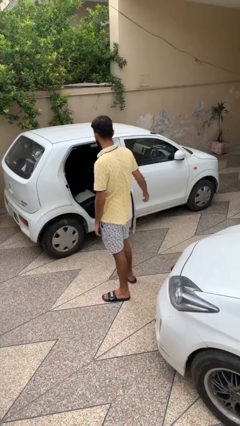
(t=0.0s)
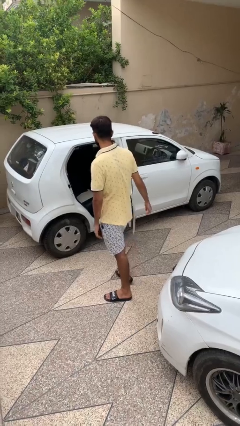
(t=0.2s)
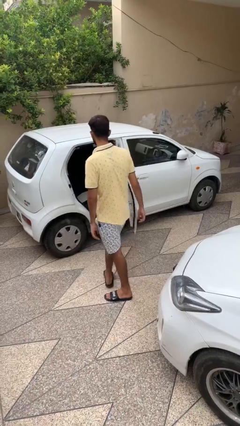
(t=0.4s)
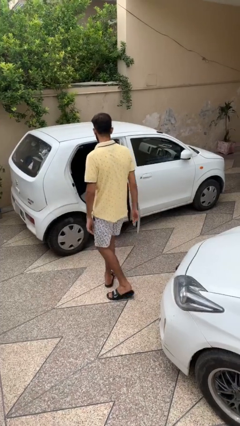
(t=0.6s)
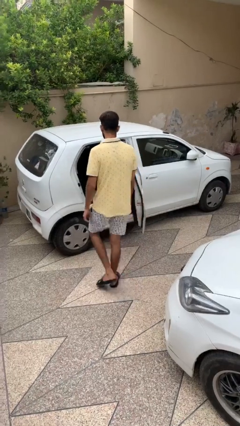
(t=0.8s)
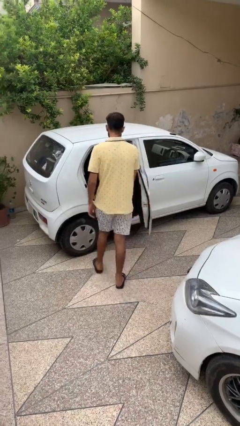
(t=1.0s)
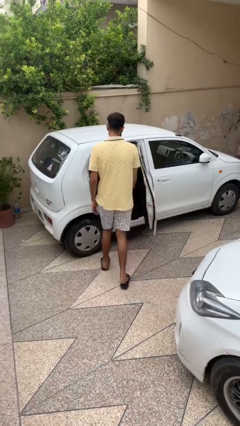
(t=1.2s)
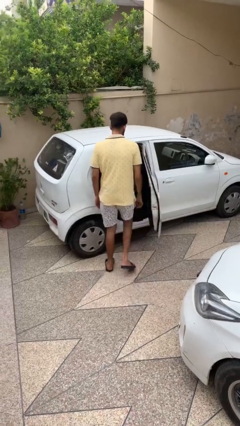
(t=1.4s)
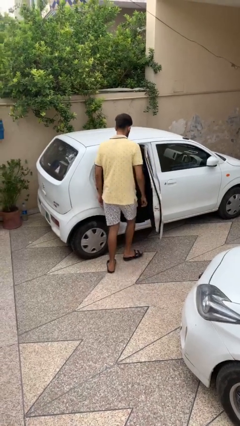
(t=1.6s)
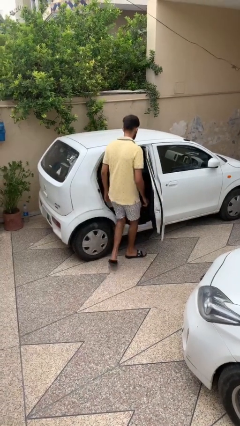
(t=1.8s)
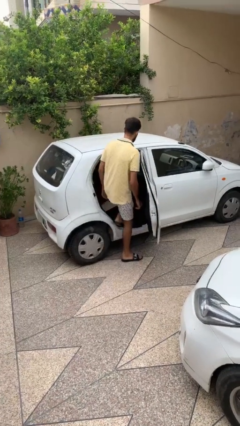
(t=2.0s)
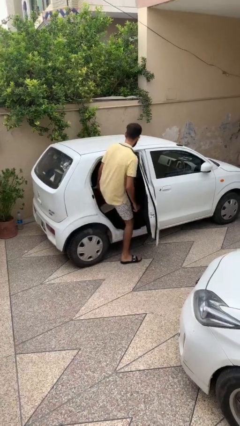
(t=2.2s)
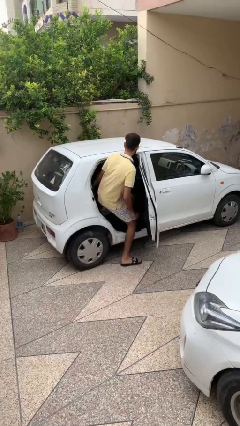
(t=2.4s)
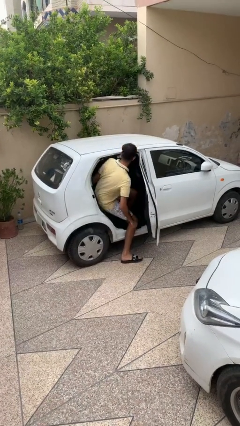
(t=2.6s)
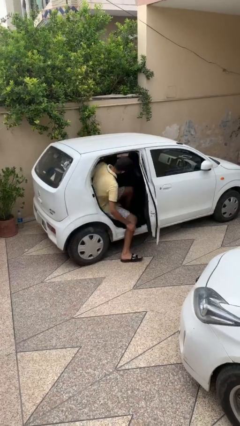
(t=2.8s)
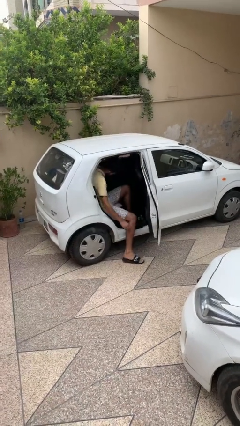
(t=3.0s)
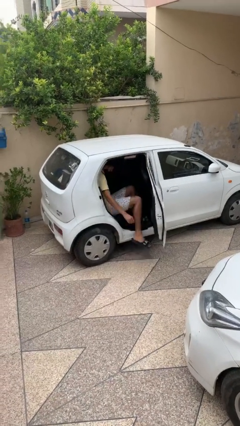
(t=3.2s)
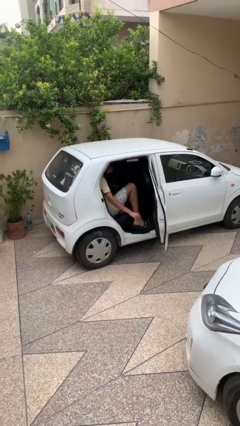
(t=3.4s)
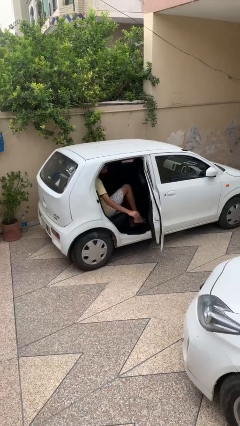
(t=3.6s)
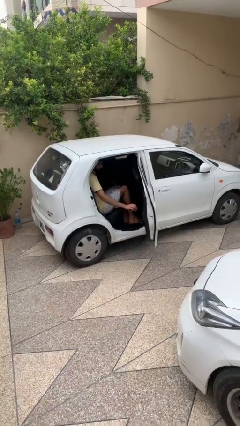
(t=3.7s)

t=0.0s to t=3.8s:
person enters car

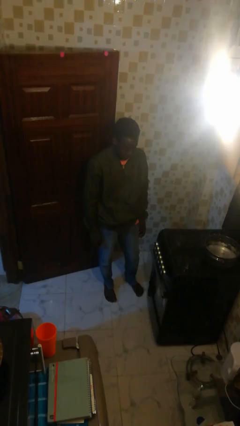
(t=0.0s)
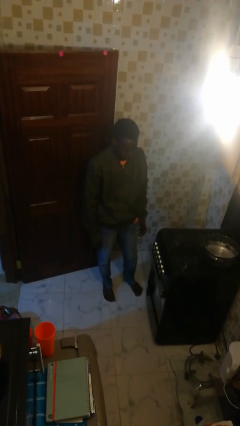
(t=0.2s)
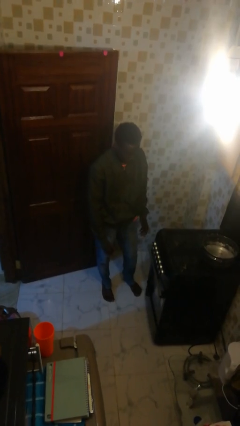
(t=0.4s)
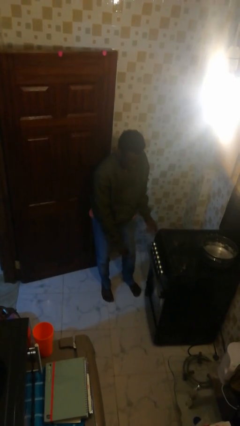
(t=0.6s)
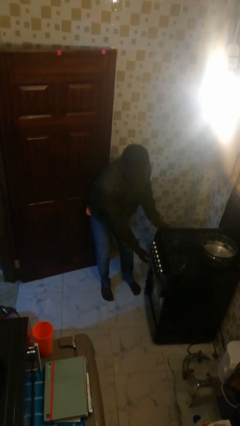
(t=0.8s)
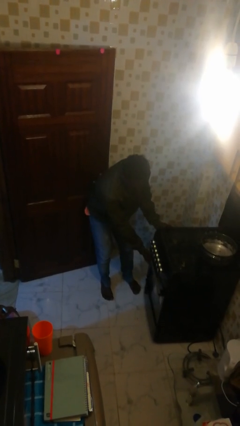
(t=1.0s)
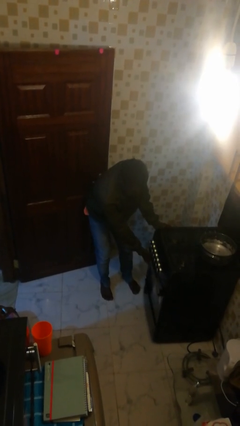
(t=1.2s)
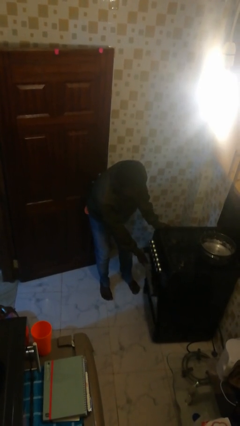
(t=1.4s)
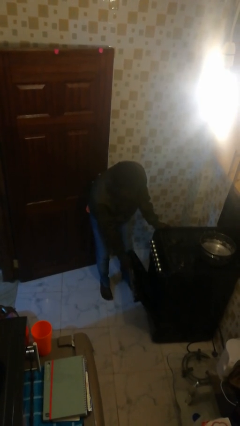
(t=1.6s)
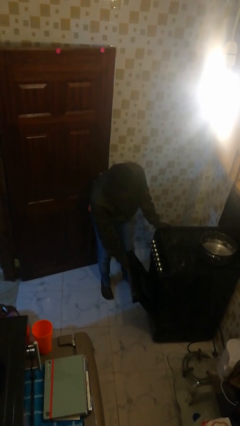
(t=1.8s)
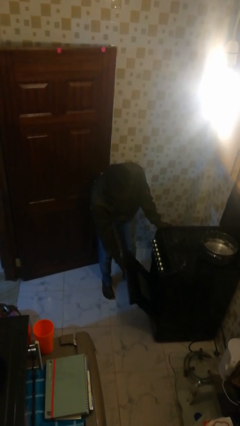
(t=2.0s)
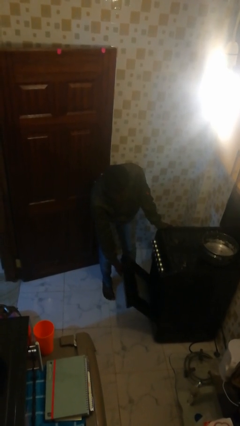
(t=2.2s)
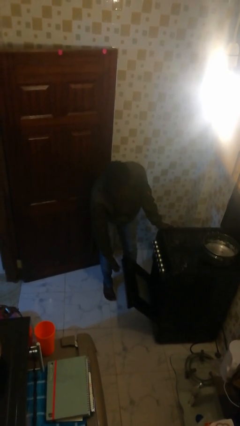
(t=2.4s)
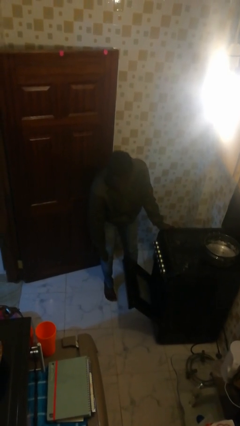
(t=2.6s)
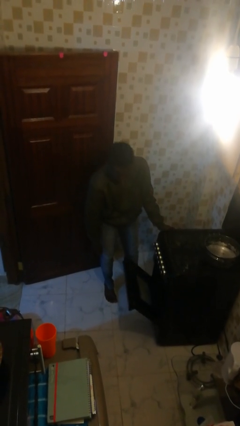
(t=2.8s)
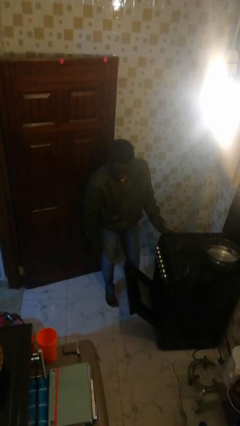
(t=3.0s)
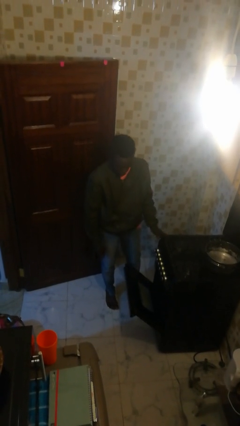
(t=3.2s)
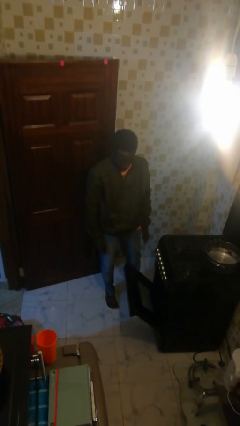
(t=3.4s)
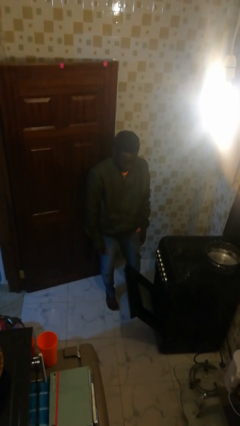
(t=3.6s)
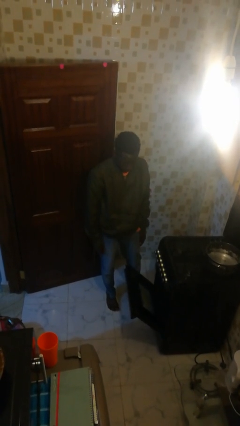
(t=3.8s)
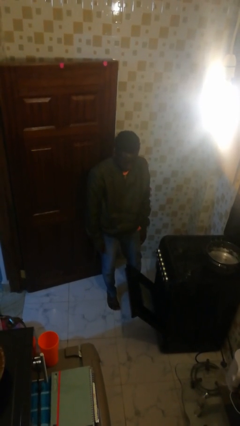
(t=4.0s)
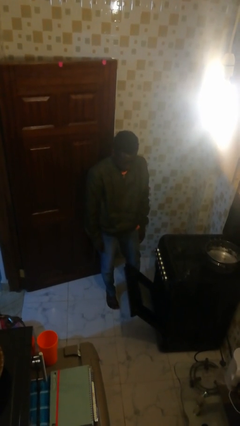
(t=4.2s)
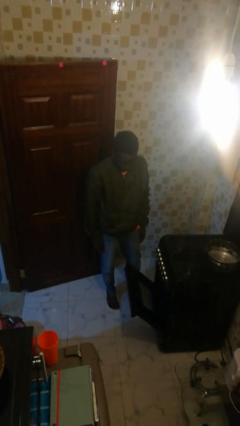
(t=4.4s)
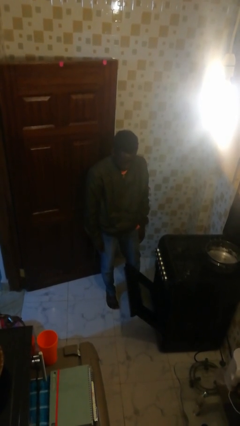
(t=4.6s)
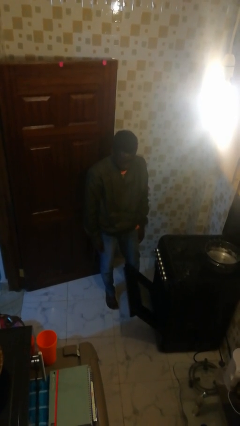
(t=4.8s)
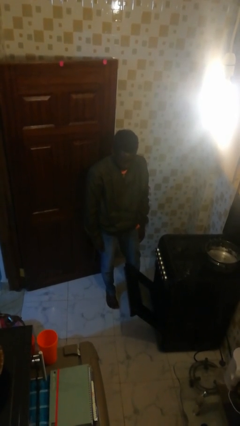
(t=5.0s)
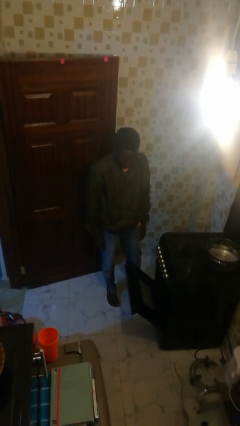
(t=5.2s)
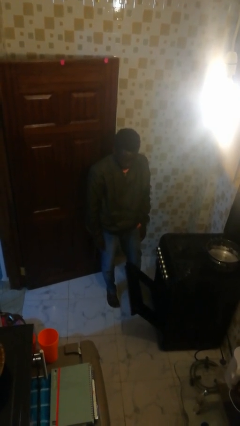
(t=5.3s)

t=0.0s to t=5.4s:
person opens oven door

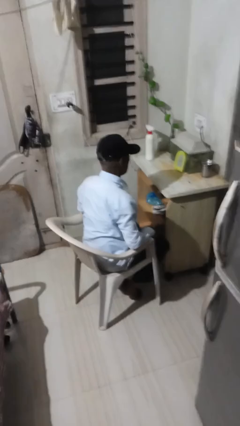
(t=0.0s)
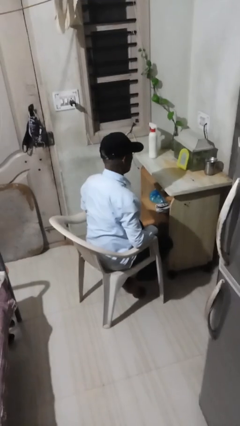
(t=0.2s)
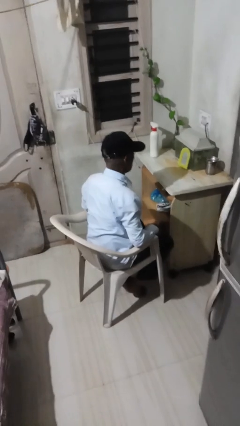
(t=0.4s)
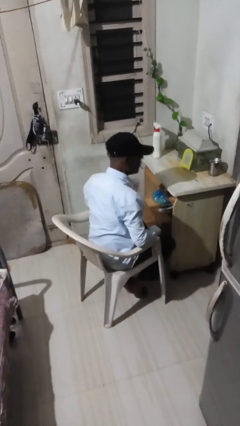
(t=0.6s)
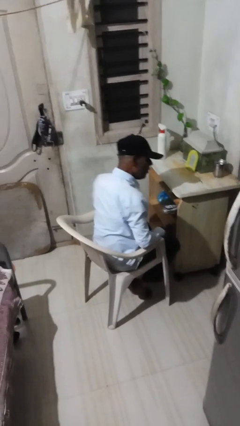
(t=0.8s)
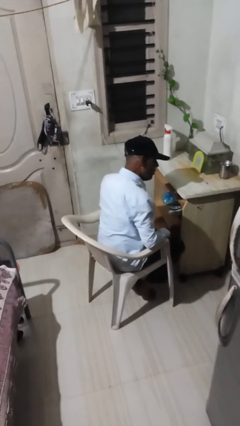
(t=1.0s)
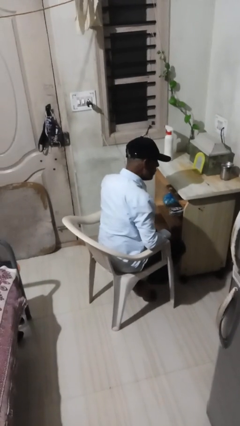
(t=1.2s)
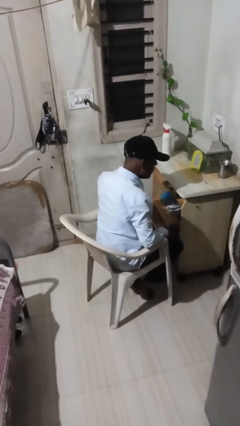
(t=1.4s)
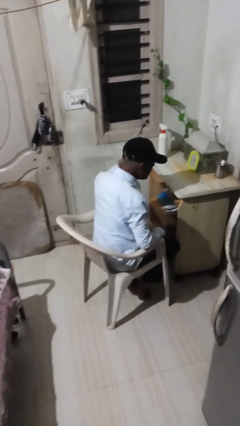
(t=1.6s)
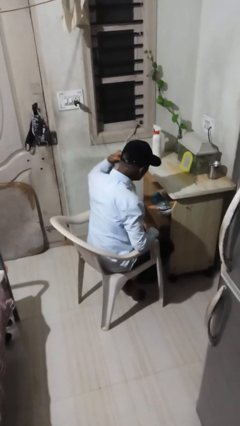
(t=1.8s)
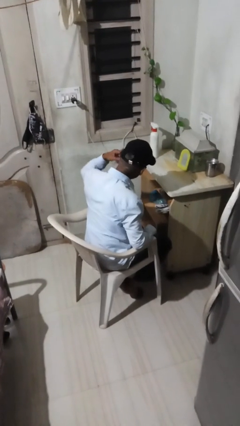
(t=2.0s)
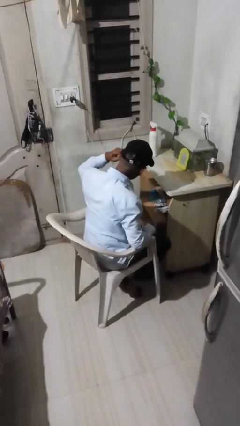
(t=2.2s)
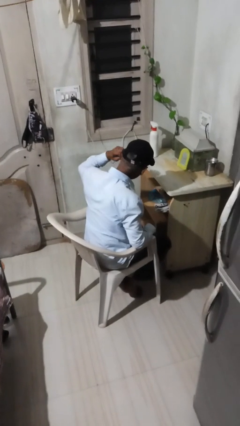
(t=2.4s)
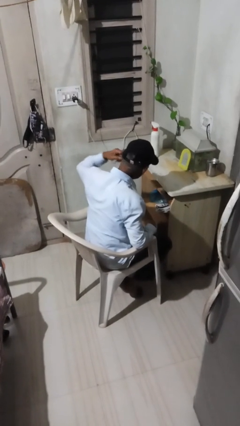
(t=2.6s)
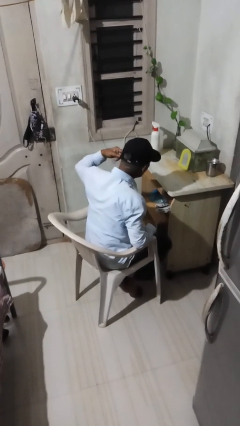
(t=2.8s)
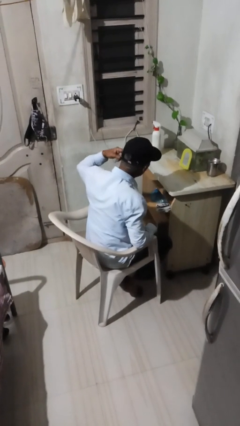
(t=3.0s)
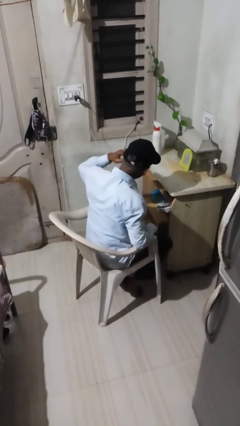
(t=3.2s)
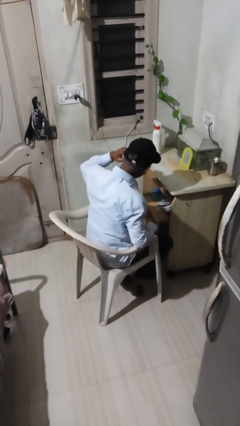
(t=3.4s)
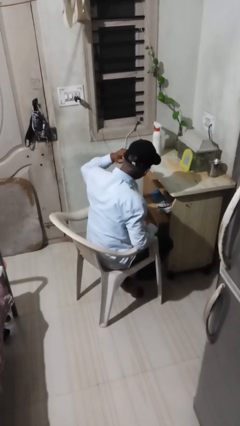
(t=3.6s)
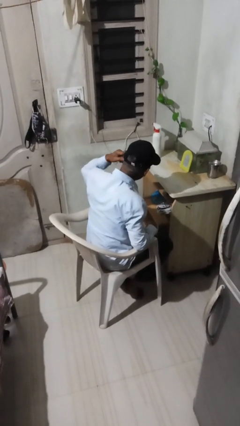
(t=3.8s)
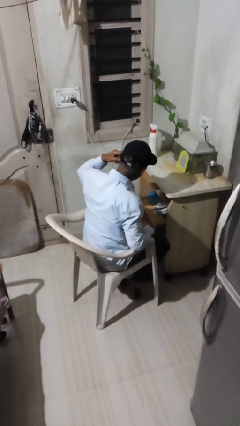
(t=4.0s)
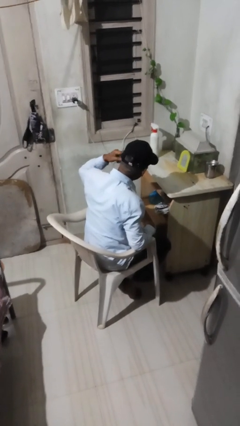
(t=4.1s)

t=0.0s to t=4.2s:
person puts fingers in ear

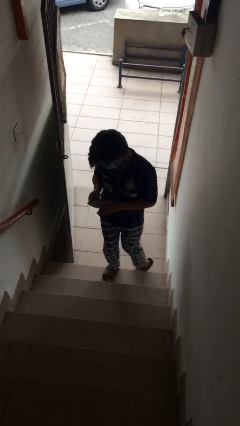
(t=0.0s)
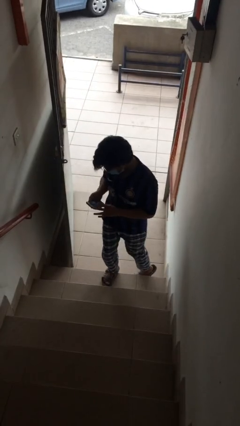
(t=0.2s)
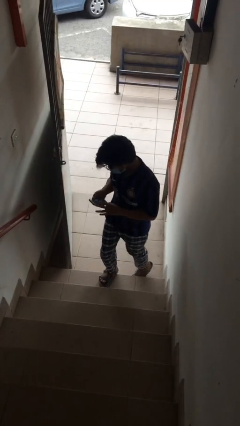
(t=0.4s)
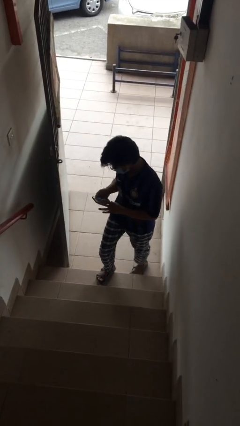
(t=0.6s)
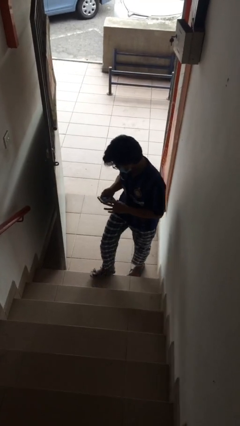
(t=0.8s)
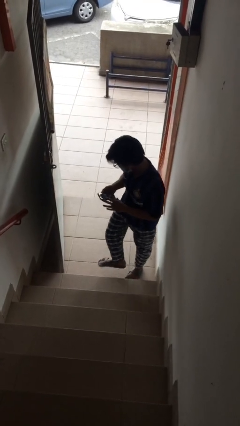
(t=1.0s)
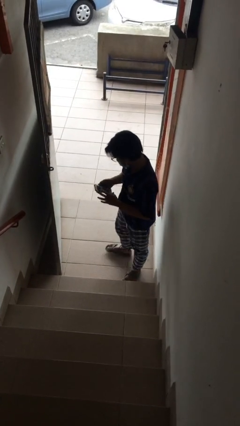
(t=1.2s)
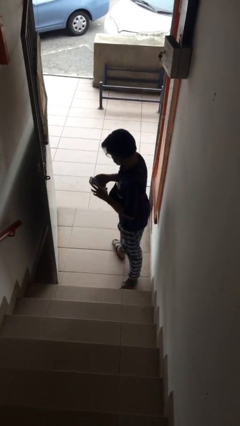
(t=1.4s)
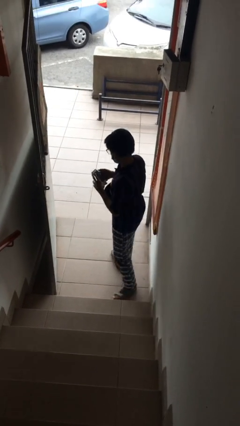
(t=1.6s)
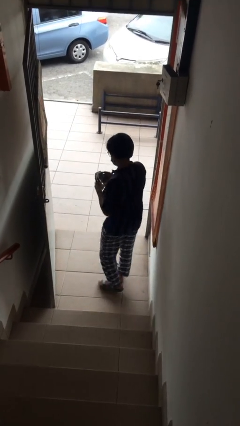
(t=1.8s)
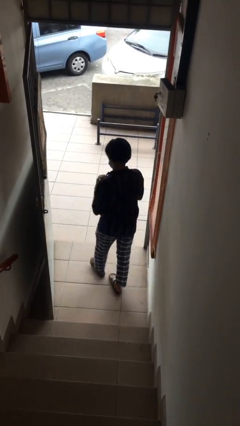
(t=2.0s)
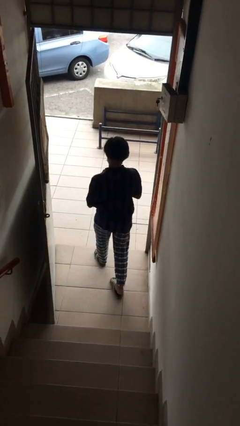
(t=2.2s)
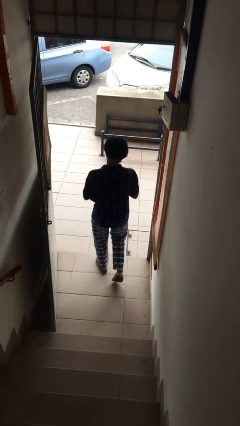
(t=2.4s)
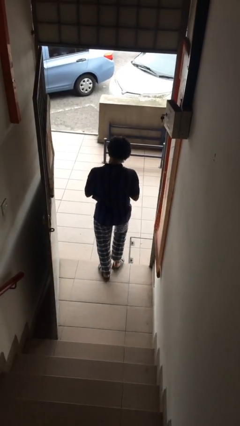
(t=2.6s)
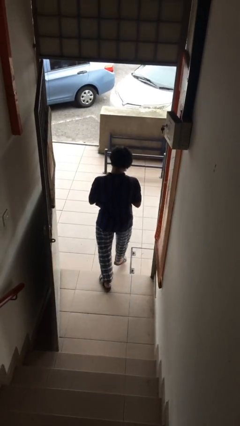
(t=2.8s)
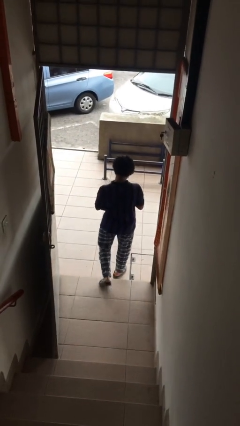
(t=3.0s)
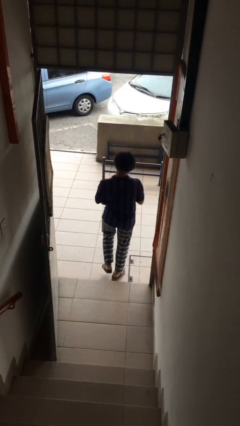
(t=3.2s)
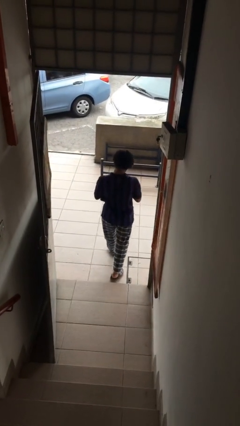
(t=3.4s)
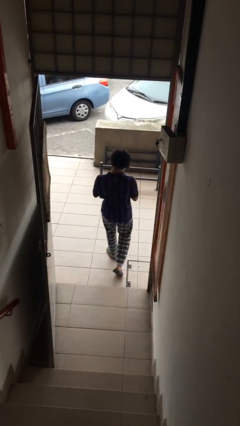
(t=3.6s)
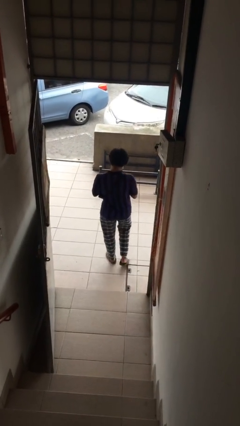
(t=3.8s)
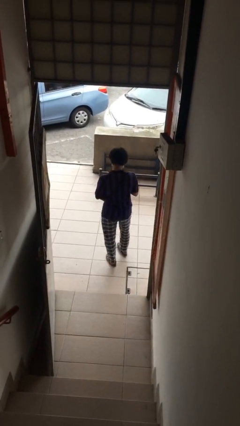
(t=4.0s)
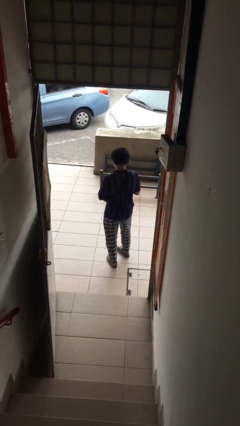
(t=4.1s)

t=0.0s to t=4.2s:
person exits scene through structure
